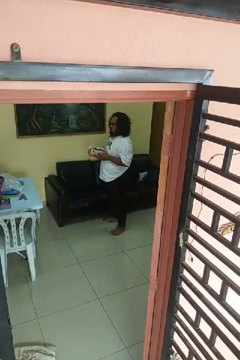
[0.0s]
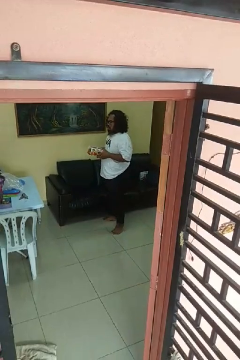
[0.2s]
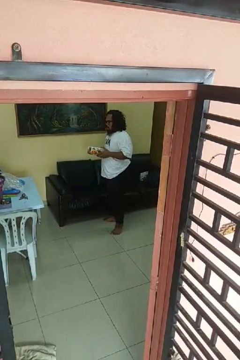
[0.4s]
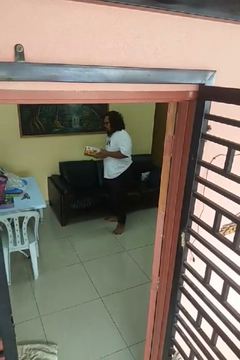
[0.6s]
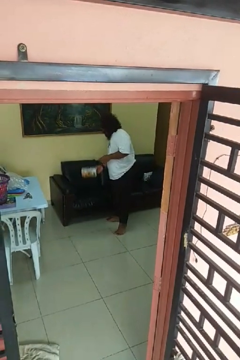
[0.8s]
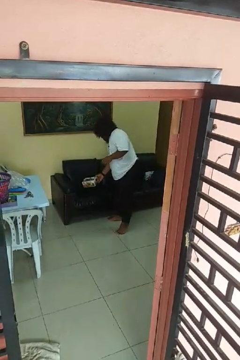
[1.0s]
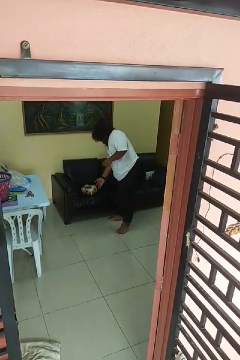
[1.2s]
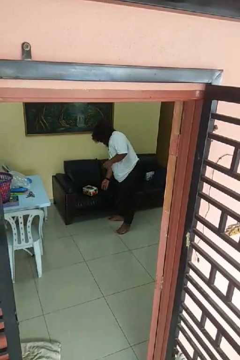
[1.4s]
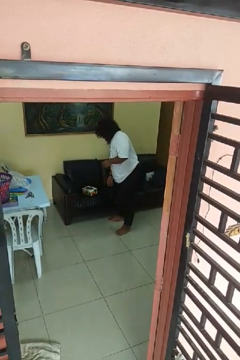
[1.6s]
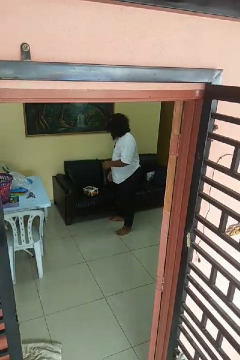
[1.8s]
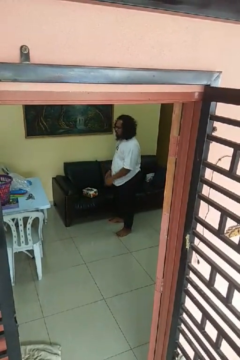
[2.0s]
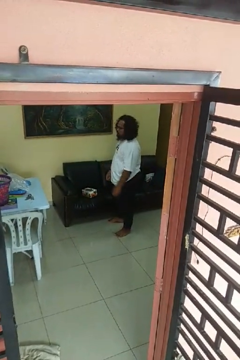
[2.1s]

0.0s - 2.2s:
person puts down object on couch

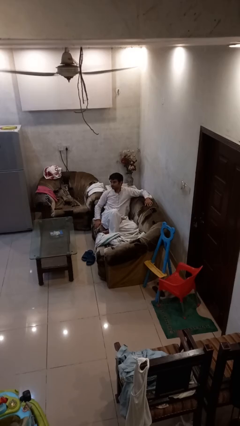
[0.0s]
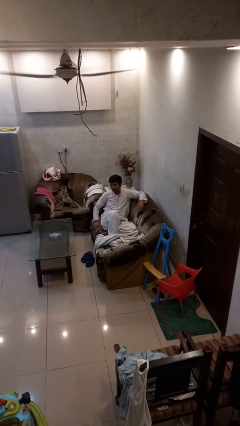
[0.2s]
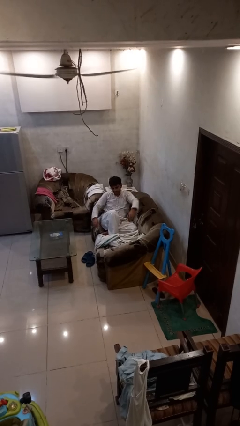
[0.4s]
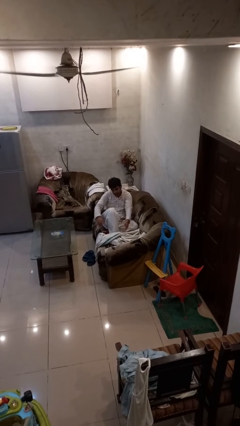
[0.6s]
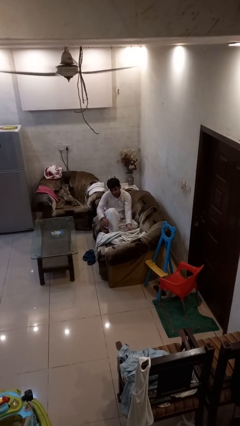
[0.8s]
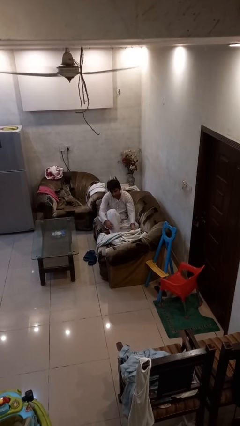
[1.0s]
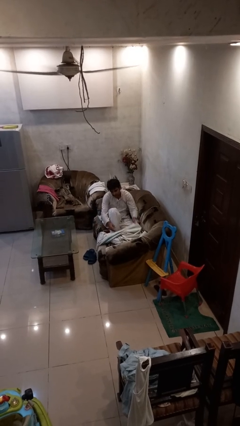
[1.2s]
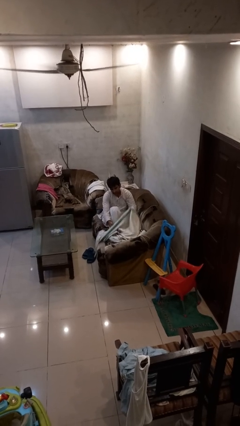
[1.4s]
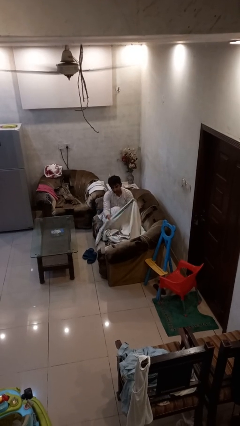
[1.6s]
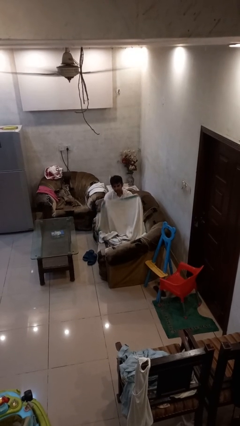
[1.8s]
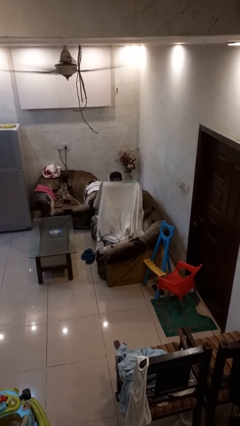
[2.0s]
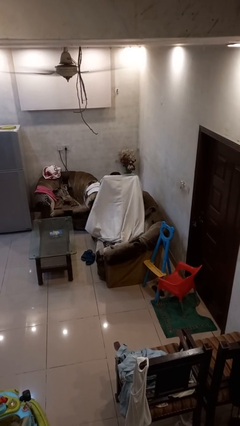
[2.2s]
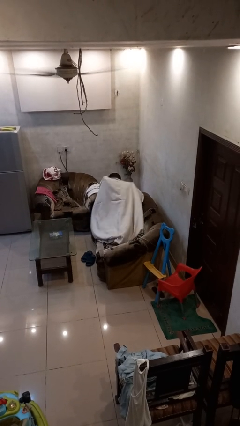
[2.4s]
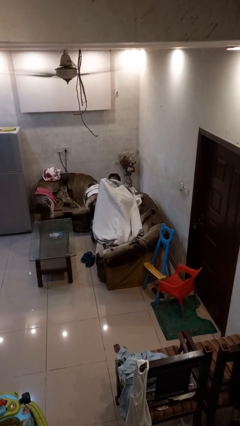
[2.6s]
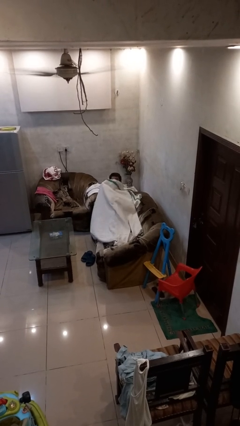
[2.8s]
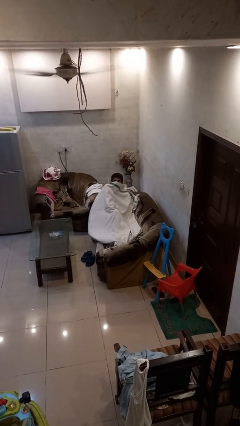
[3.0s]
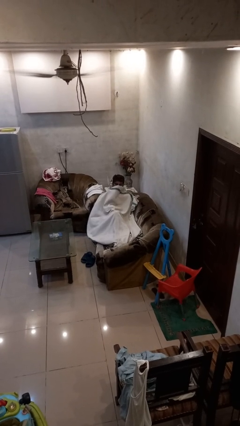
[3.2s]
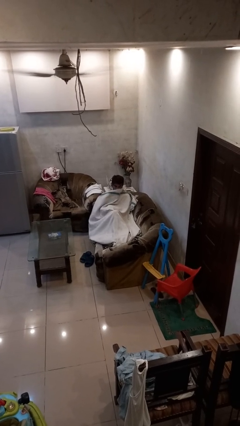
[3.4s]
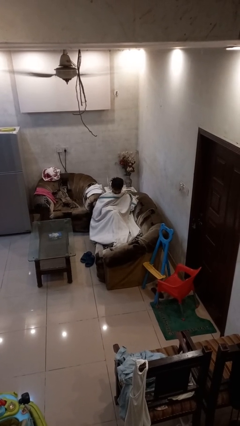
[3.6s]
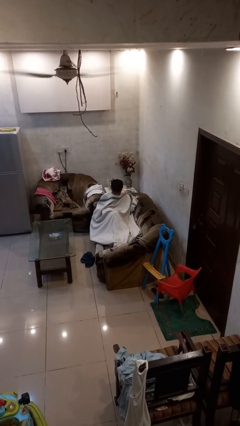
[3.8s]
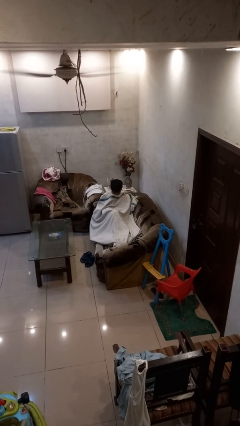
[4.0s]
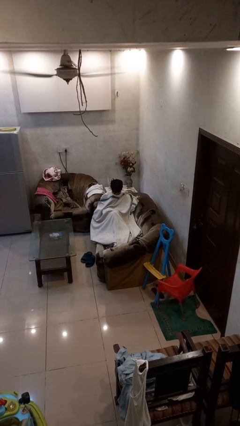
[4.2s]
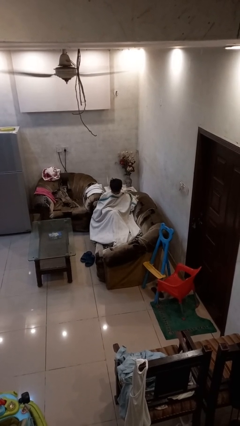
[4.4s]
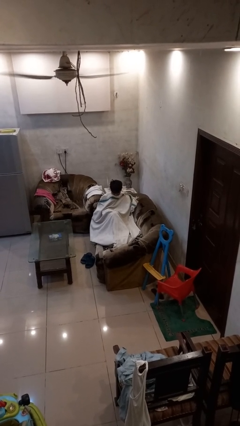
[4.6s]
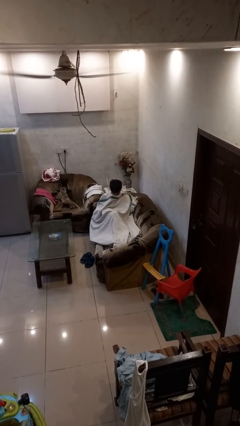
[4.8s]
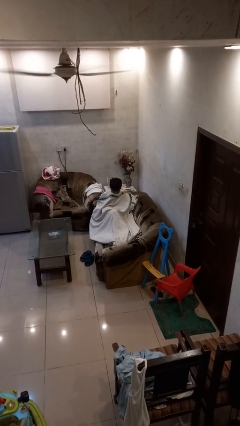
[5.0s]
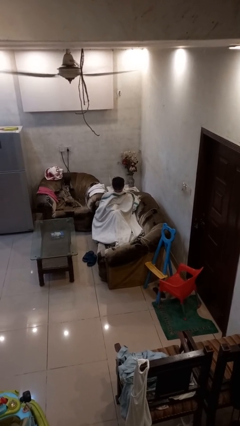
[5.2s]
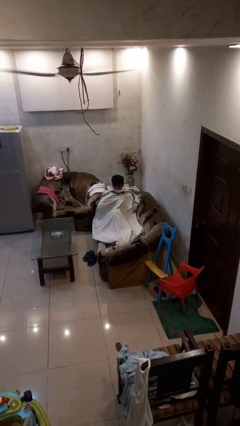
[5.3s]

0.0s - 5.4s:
person covers with blanket

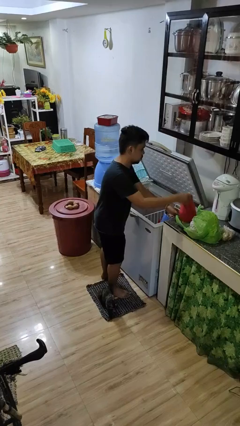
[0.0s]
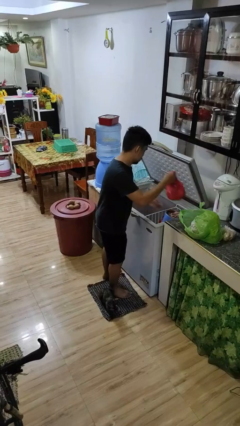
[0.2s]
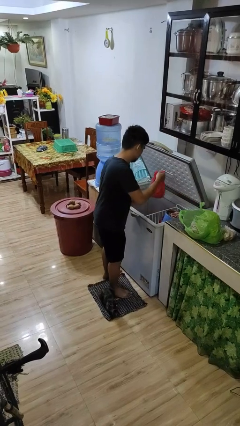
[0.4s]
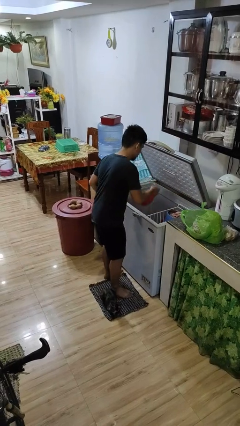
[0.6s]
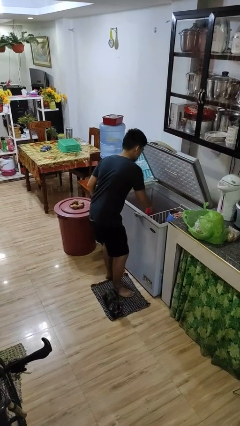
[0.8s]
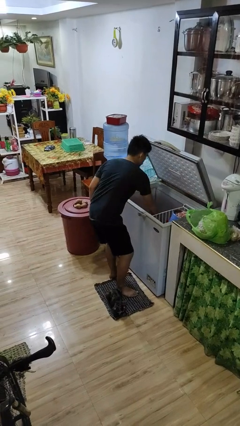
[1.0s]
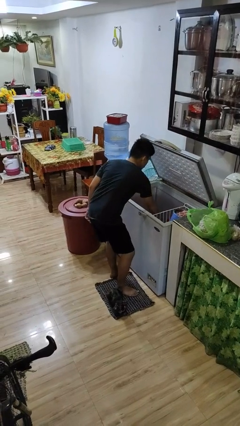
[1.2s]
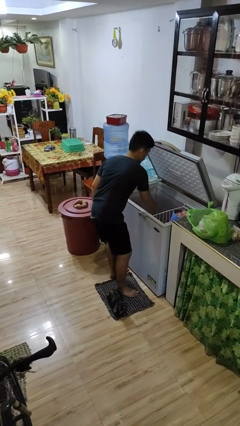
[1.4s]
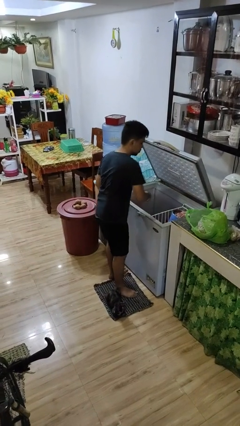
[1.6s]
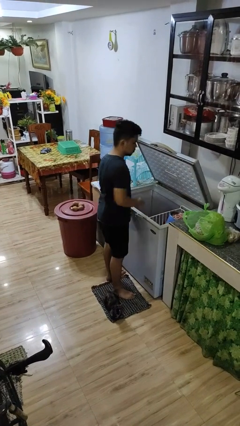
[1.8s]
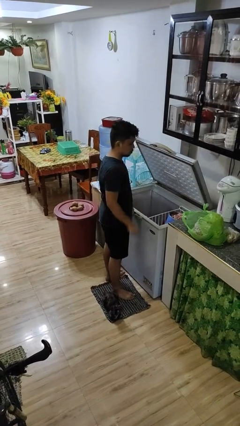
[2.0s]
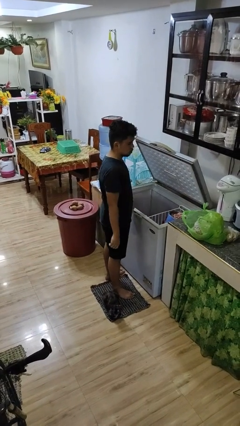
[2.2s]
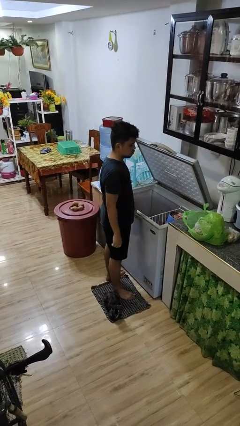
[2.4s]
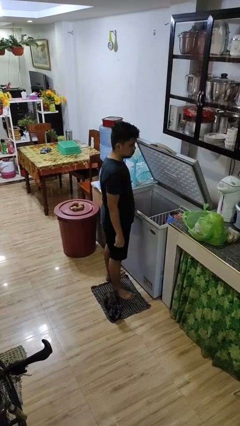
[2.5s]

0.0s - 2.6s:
person loads groceries into refrigerator

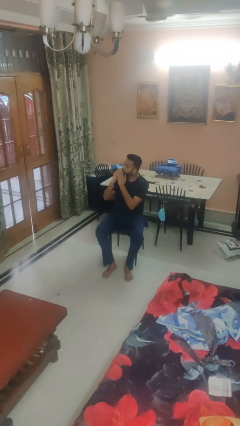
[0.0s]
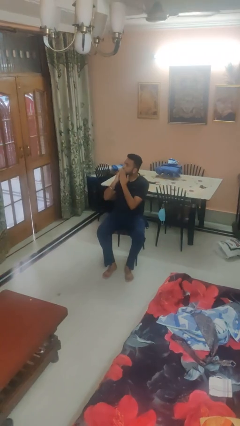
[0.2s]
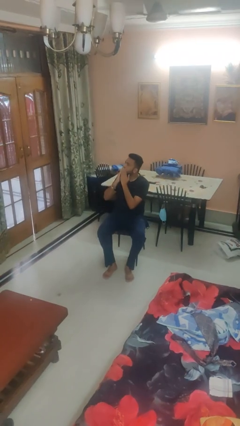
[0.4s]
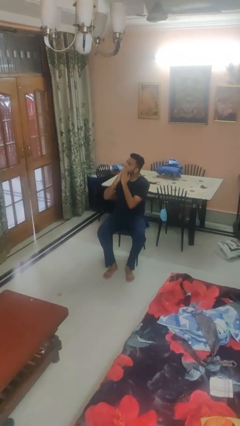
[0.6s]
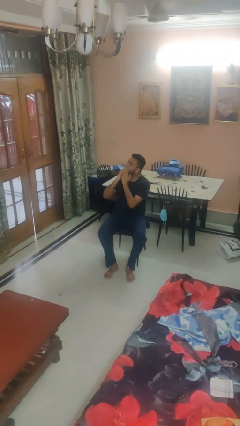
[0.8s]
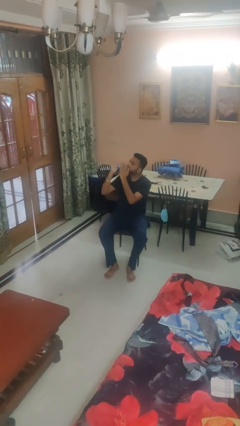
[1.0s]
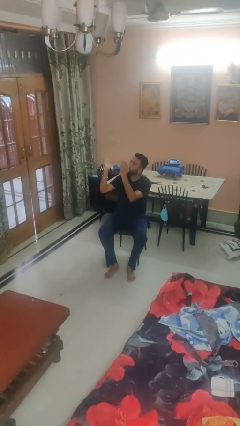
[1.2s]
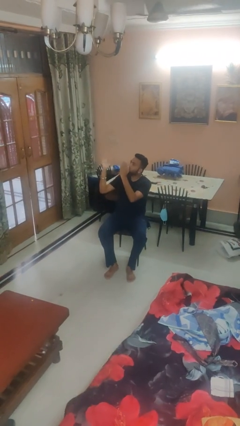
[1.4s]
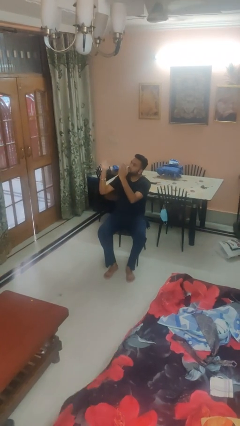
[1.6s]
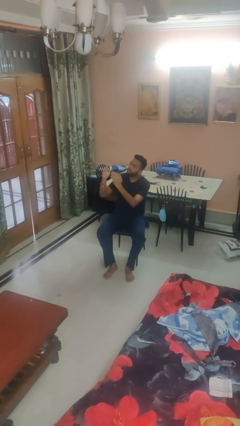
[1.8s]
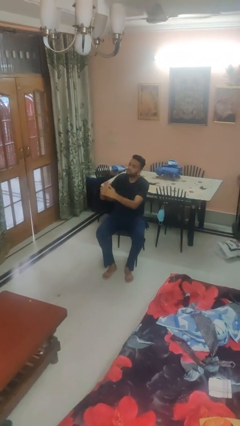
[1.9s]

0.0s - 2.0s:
person gestures blow kiss

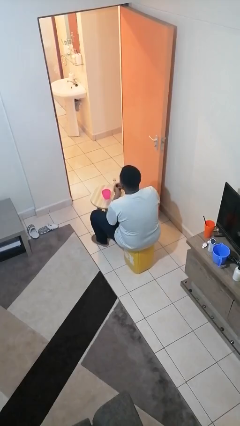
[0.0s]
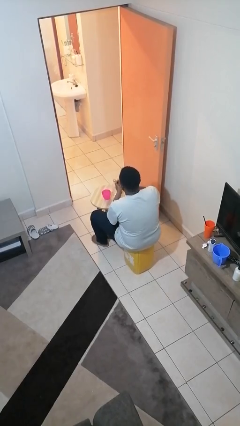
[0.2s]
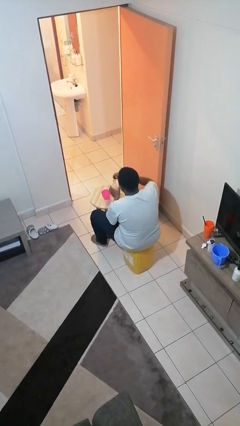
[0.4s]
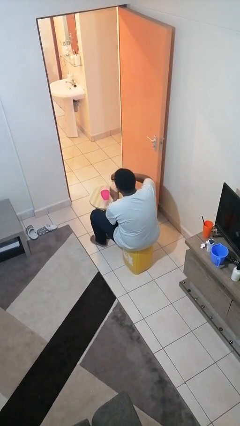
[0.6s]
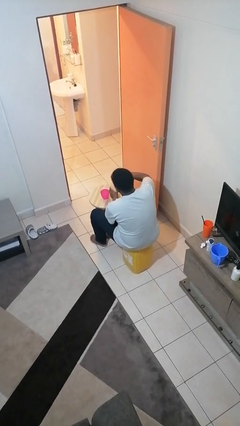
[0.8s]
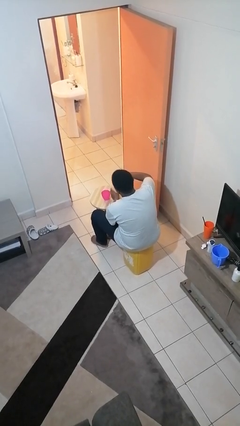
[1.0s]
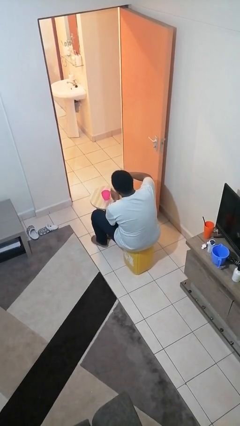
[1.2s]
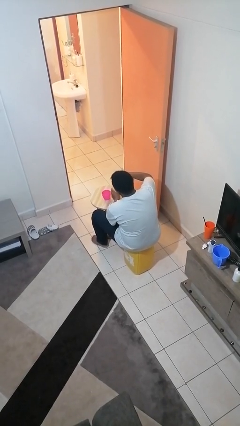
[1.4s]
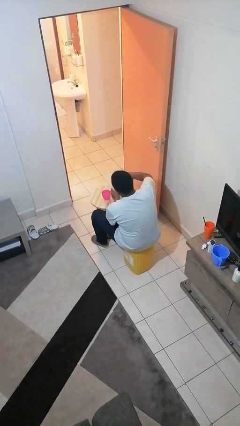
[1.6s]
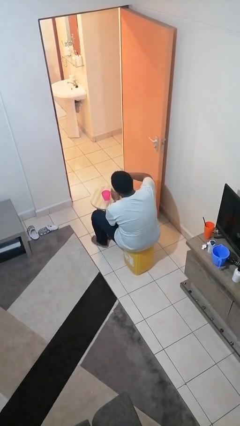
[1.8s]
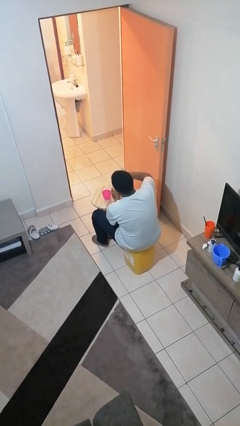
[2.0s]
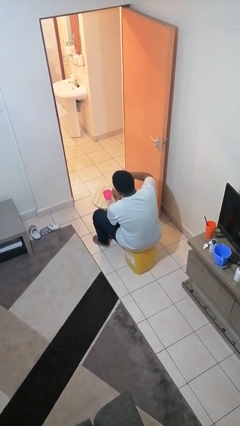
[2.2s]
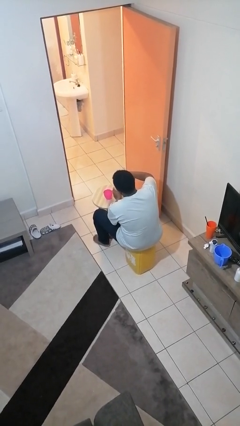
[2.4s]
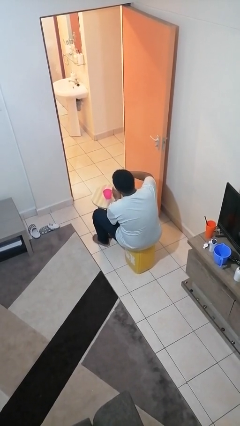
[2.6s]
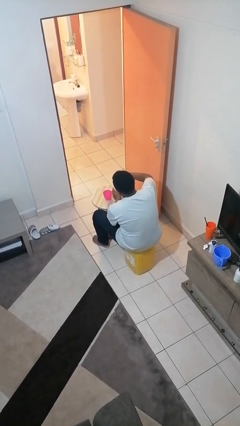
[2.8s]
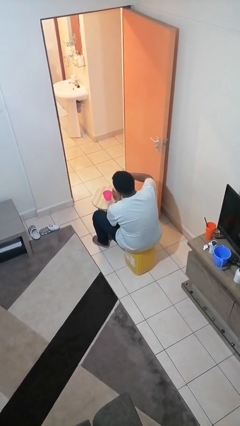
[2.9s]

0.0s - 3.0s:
person screws lid to bottle

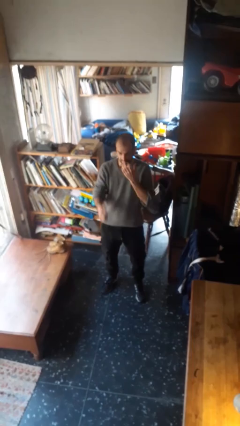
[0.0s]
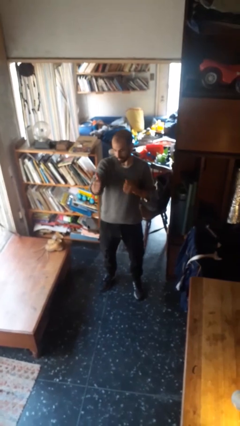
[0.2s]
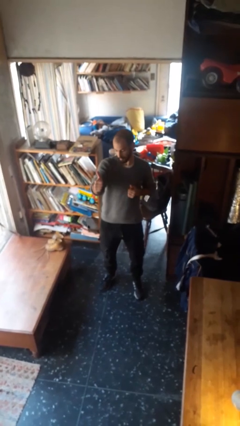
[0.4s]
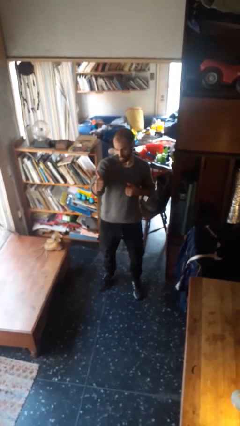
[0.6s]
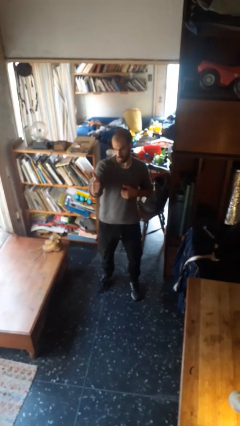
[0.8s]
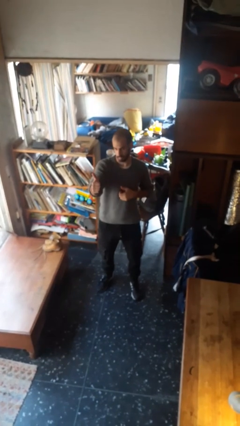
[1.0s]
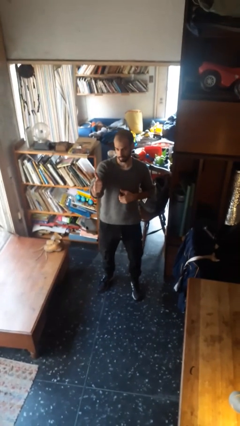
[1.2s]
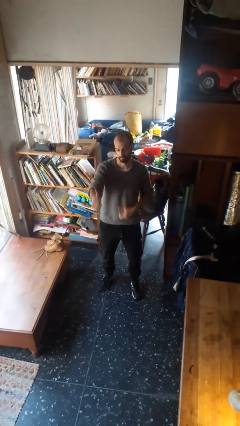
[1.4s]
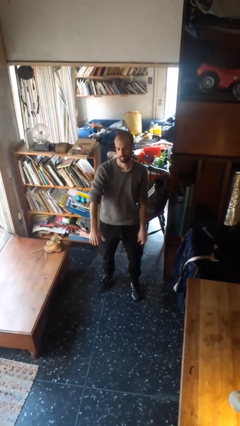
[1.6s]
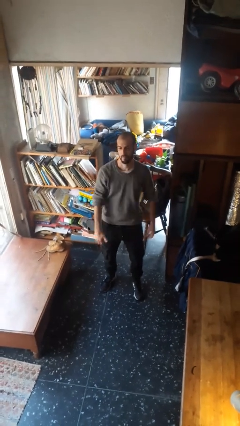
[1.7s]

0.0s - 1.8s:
person gestures thumbs up

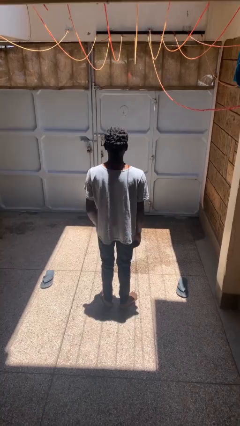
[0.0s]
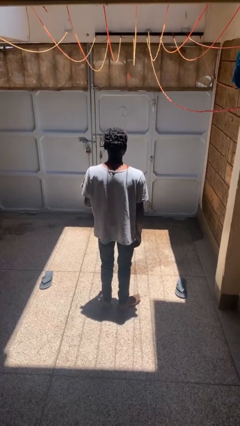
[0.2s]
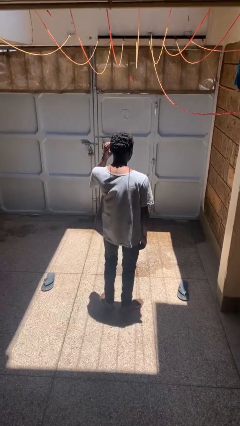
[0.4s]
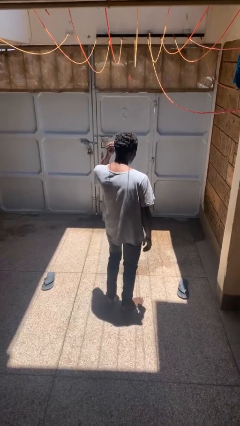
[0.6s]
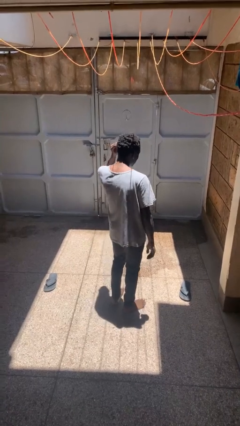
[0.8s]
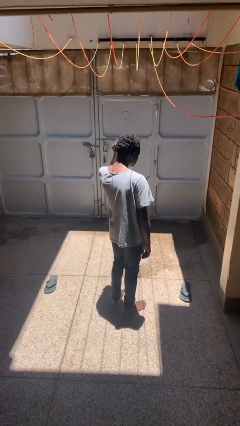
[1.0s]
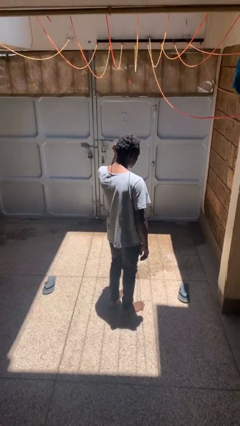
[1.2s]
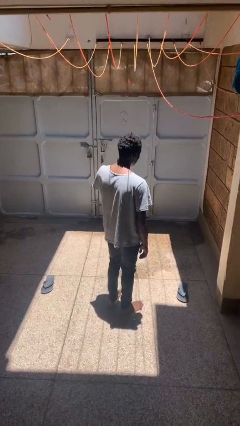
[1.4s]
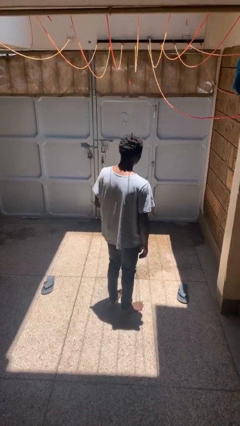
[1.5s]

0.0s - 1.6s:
person touches earlobe
